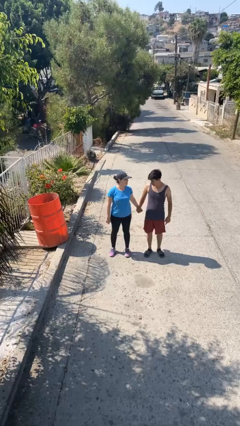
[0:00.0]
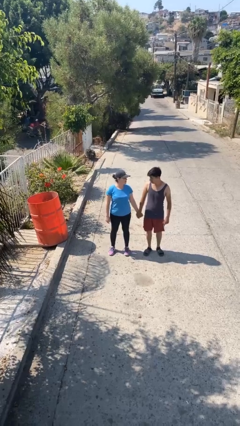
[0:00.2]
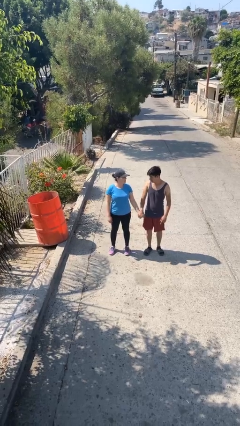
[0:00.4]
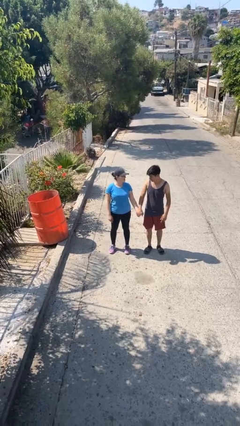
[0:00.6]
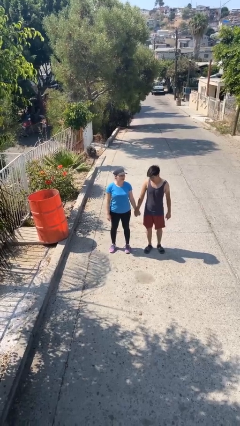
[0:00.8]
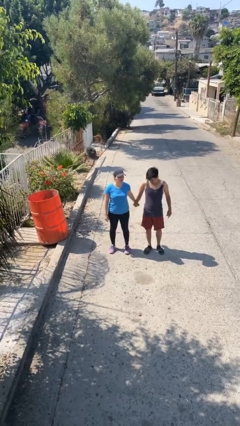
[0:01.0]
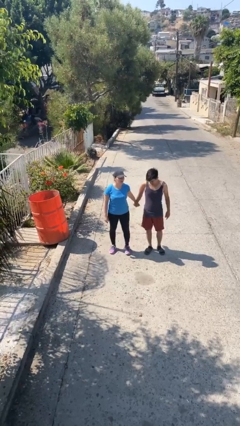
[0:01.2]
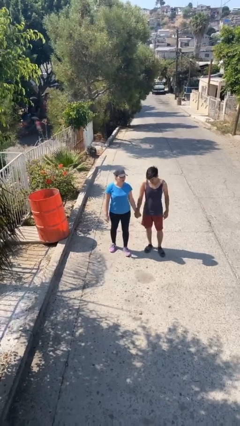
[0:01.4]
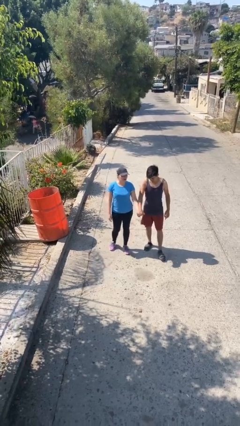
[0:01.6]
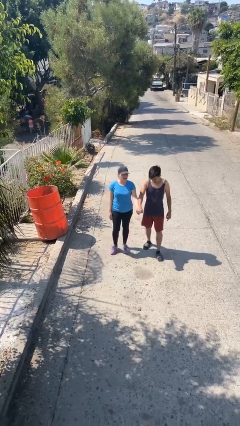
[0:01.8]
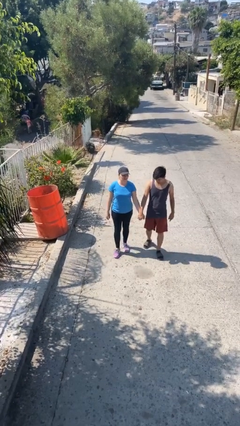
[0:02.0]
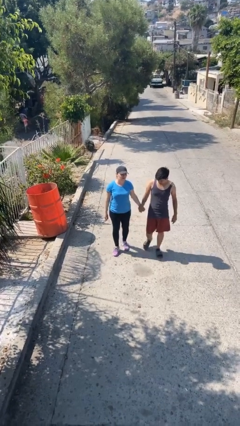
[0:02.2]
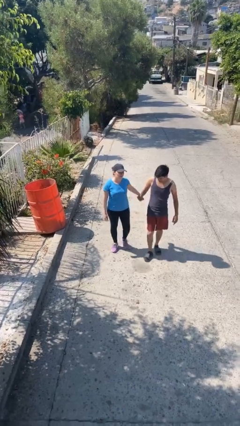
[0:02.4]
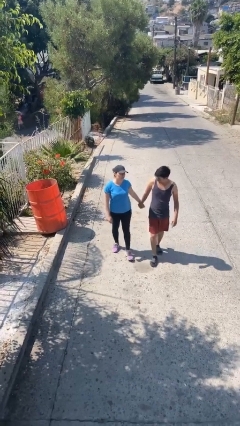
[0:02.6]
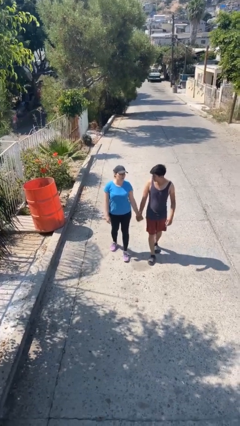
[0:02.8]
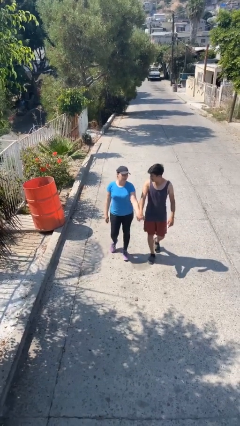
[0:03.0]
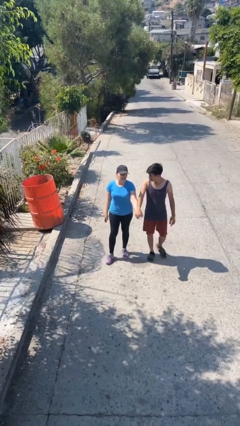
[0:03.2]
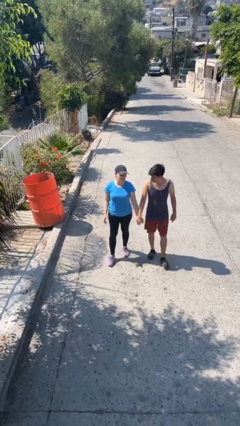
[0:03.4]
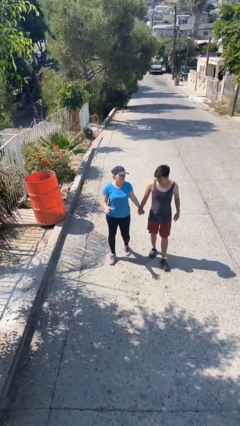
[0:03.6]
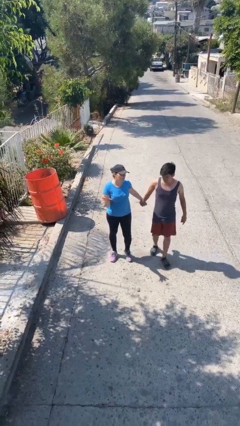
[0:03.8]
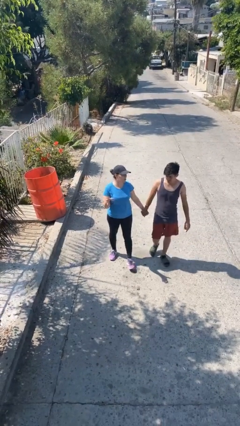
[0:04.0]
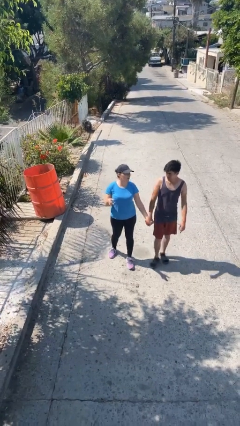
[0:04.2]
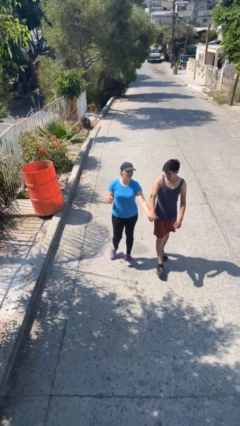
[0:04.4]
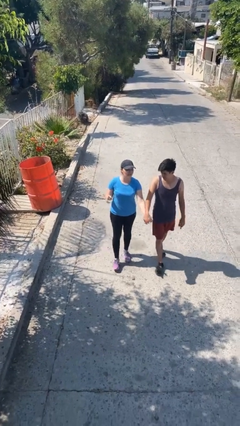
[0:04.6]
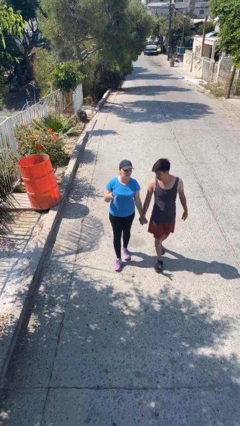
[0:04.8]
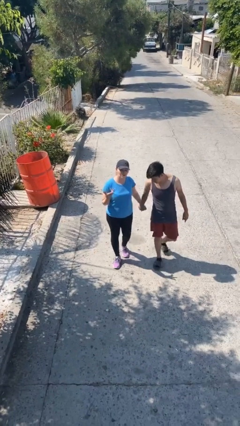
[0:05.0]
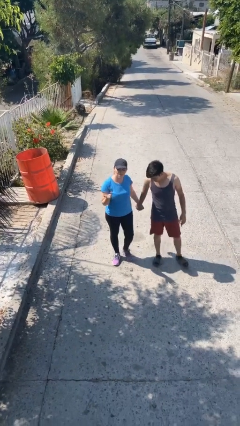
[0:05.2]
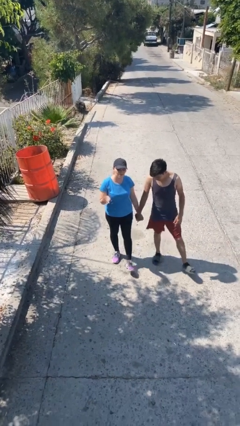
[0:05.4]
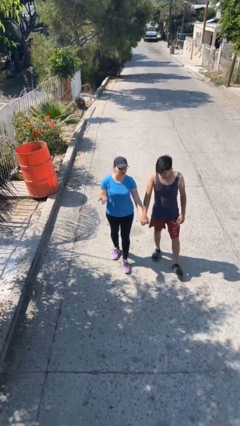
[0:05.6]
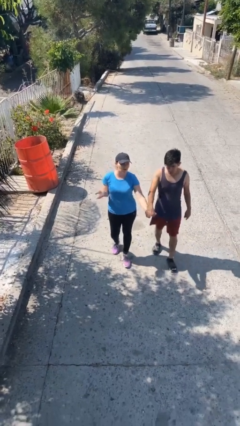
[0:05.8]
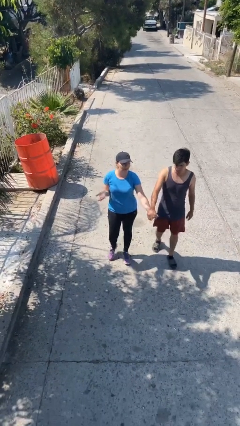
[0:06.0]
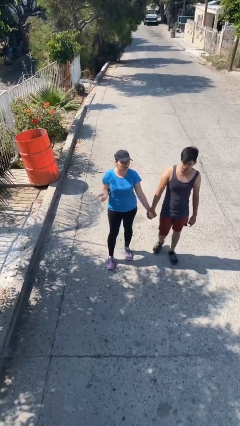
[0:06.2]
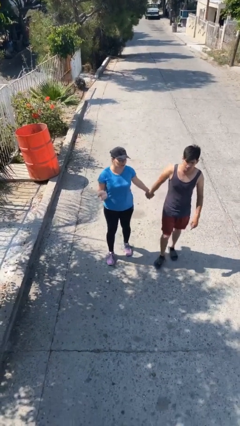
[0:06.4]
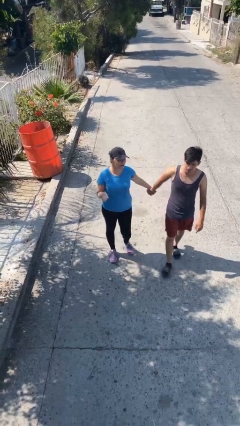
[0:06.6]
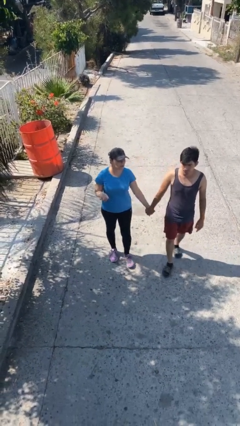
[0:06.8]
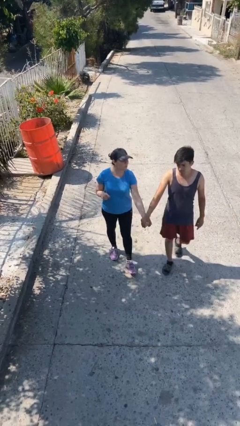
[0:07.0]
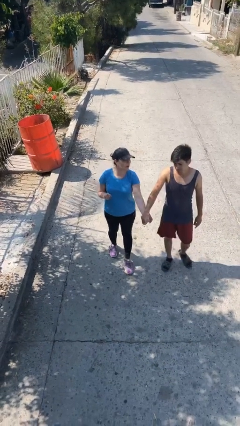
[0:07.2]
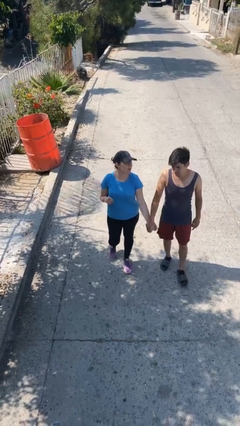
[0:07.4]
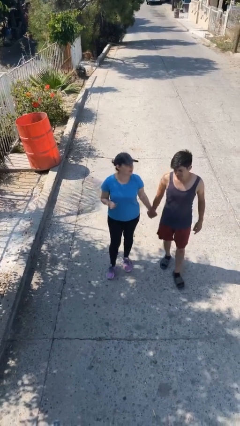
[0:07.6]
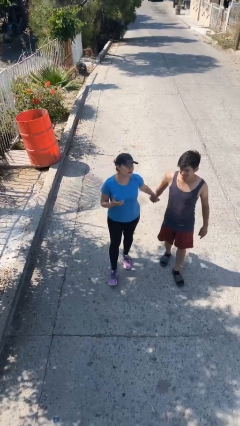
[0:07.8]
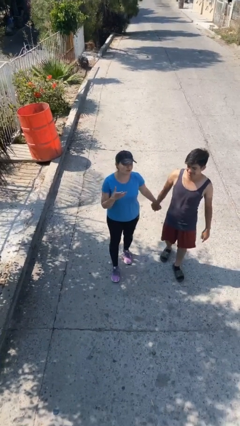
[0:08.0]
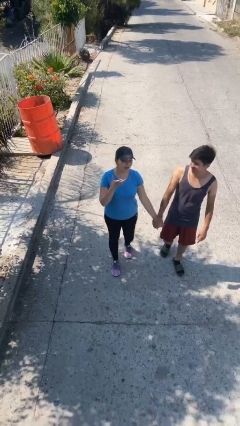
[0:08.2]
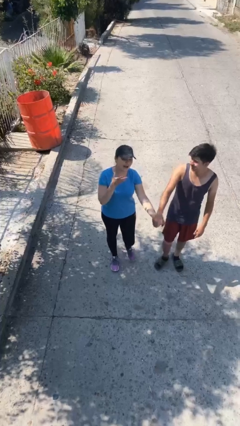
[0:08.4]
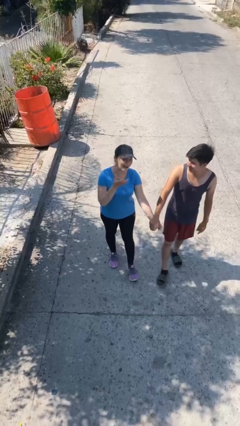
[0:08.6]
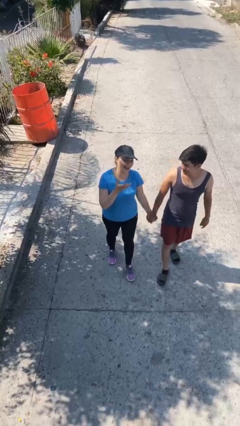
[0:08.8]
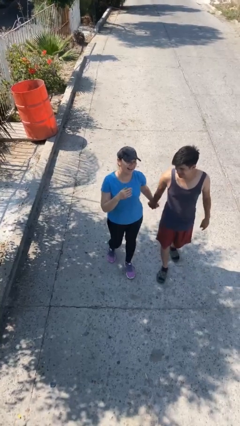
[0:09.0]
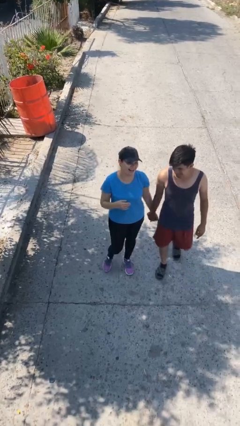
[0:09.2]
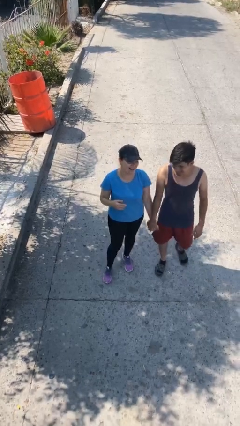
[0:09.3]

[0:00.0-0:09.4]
person holds hand

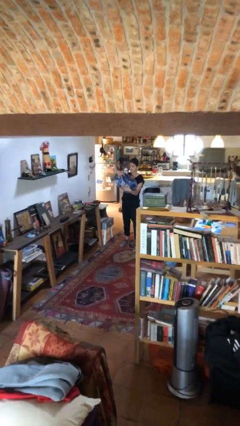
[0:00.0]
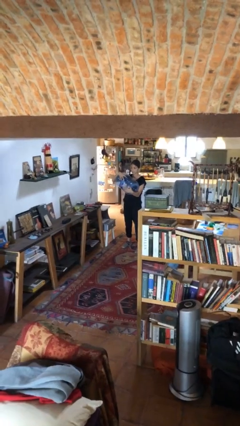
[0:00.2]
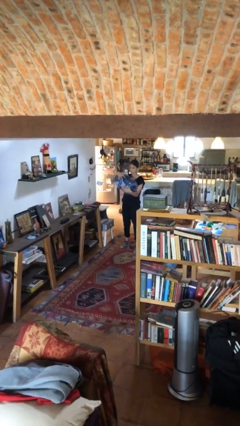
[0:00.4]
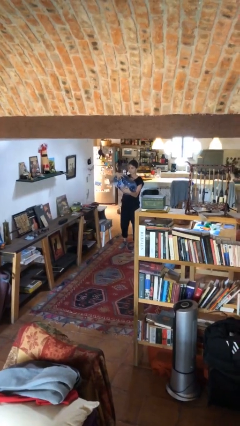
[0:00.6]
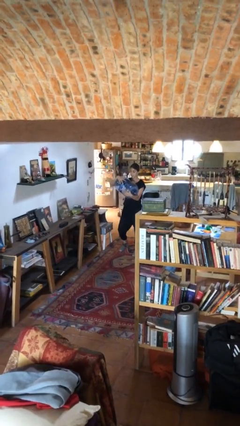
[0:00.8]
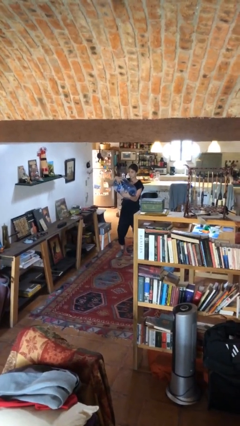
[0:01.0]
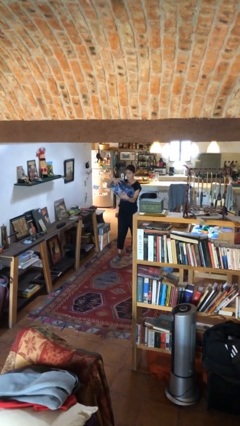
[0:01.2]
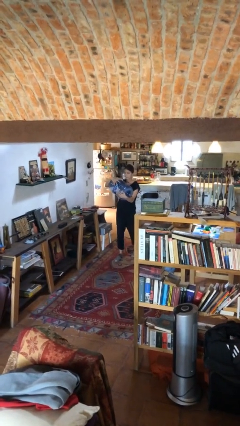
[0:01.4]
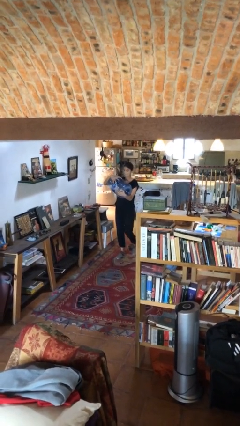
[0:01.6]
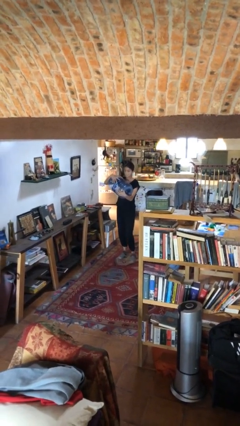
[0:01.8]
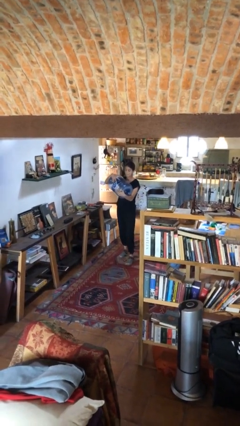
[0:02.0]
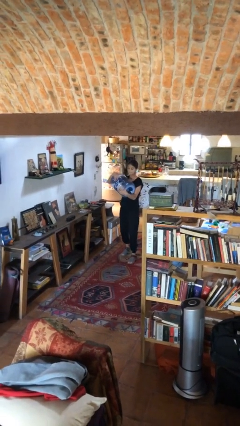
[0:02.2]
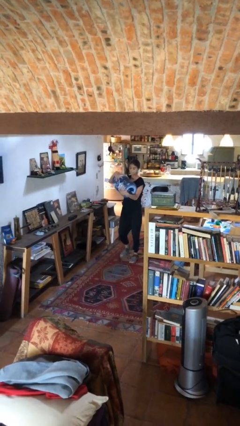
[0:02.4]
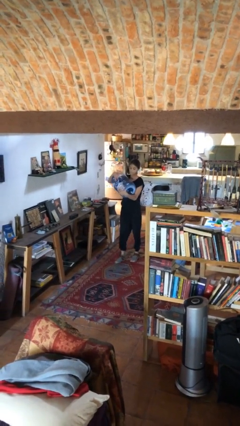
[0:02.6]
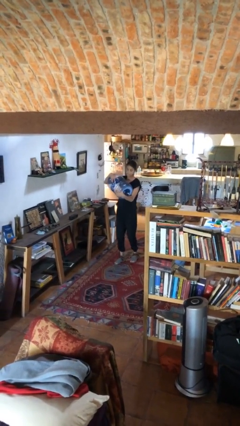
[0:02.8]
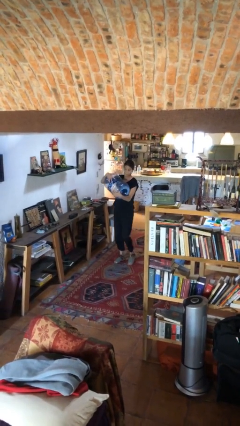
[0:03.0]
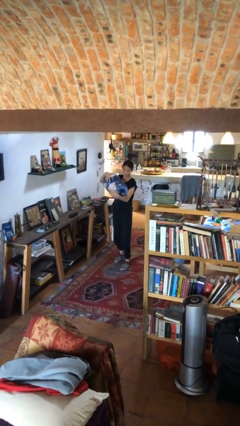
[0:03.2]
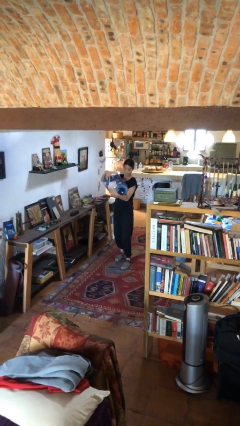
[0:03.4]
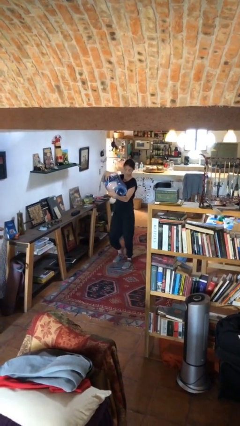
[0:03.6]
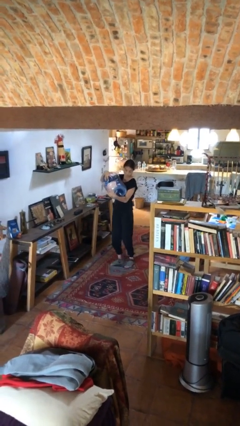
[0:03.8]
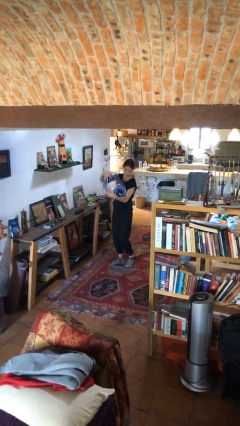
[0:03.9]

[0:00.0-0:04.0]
person carries heavy object

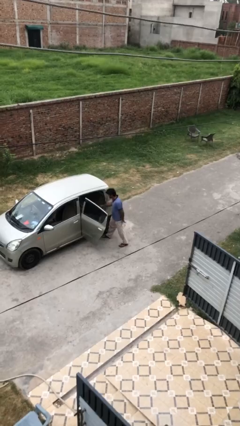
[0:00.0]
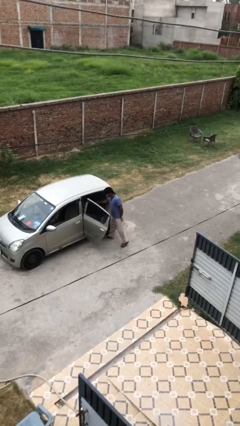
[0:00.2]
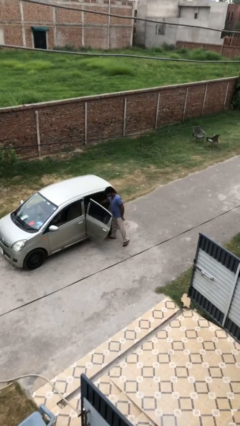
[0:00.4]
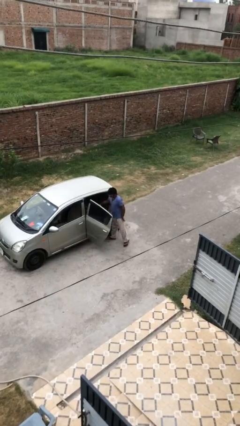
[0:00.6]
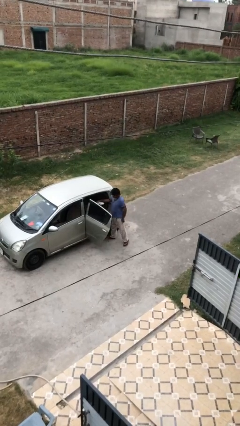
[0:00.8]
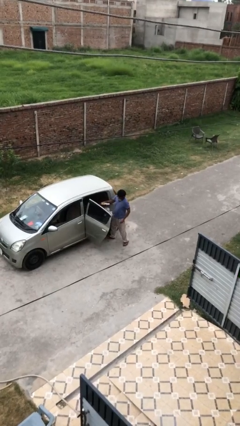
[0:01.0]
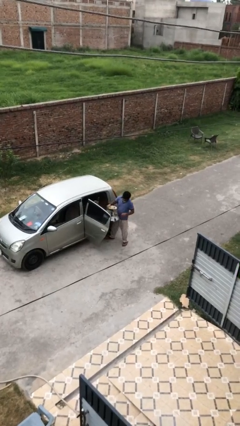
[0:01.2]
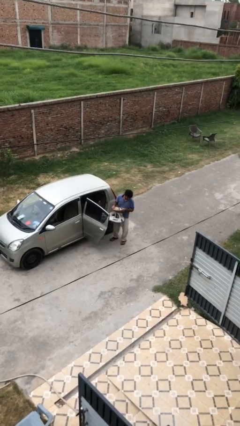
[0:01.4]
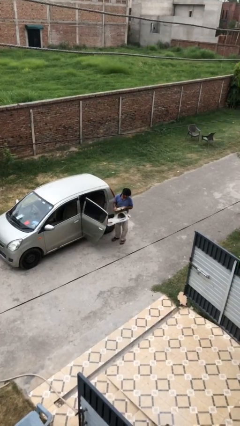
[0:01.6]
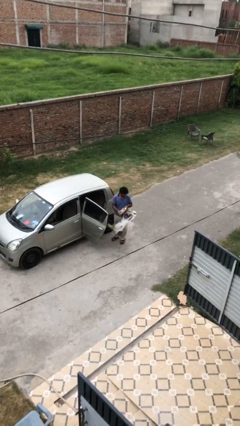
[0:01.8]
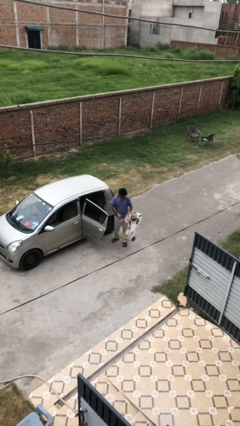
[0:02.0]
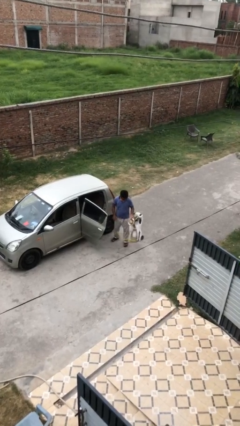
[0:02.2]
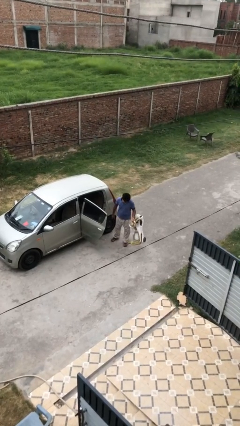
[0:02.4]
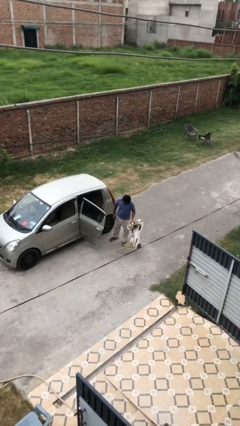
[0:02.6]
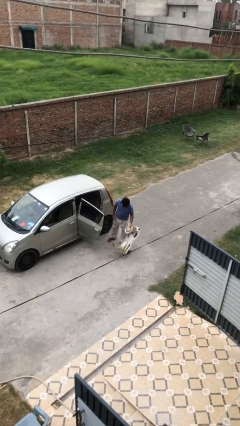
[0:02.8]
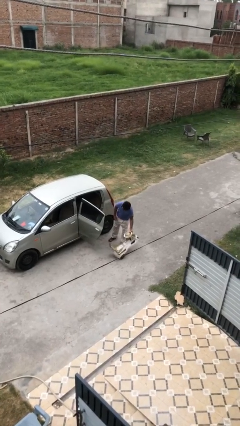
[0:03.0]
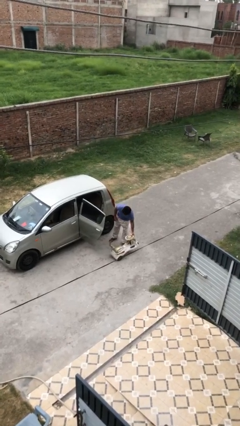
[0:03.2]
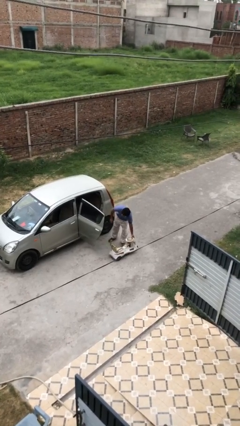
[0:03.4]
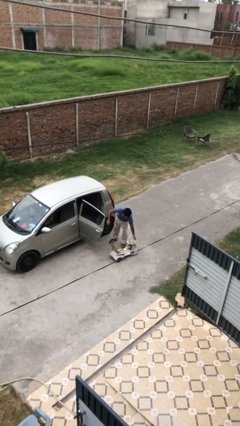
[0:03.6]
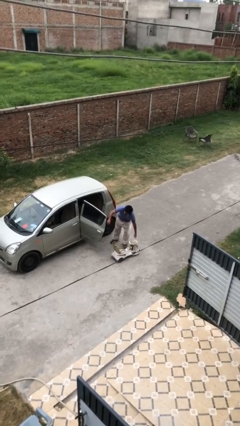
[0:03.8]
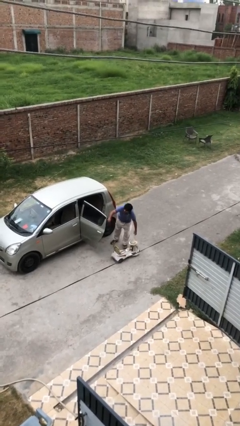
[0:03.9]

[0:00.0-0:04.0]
person unloads car

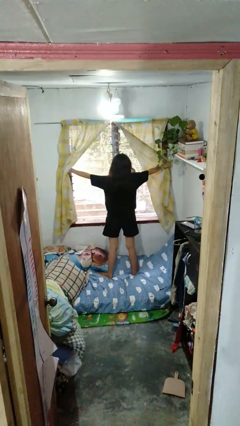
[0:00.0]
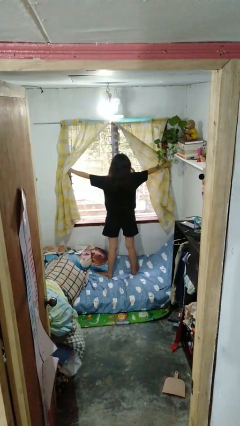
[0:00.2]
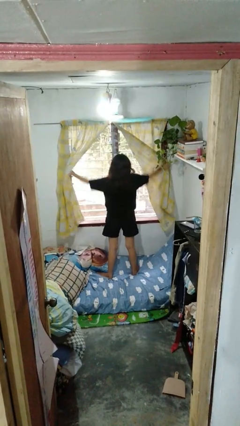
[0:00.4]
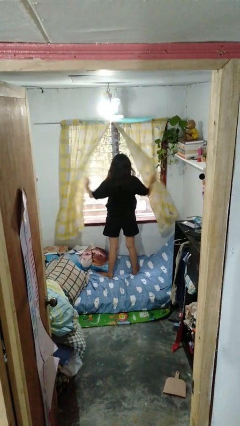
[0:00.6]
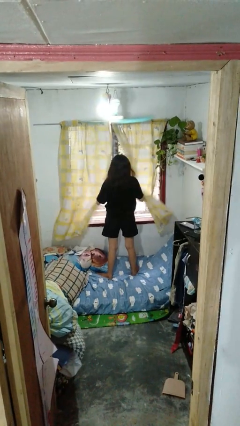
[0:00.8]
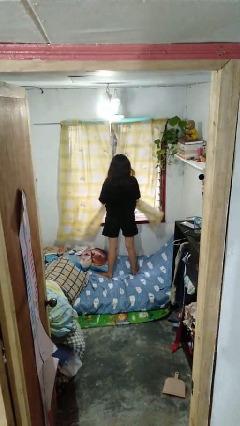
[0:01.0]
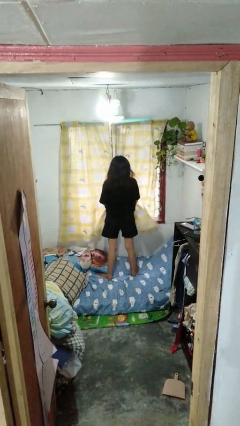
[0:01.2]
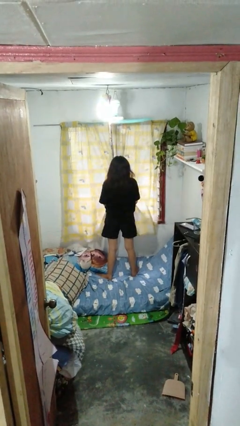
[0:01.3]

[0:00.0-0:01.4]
person closes curtains
